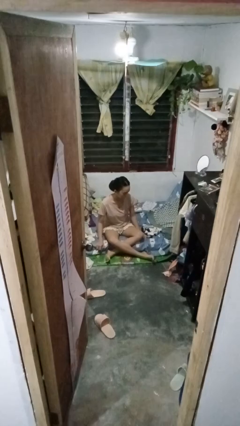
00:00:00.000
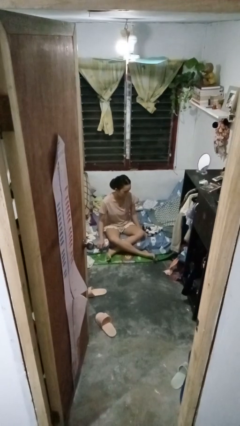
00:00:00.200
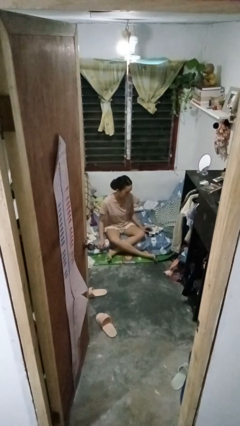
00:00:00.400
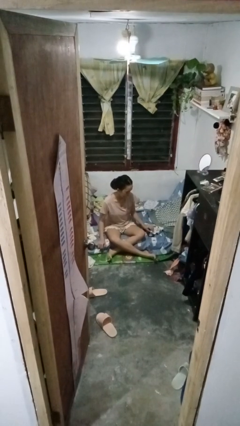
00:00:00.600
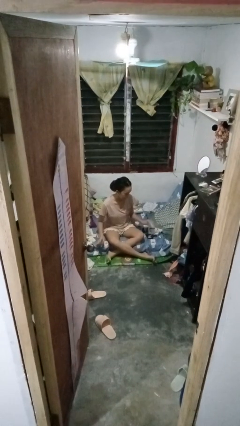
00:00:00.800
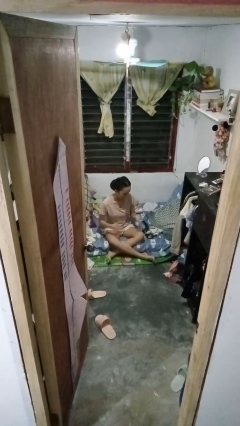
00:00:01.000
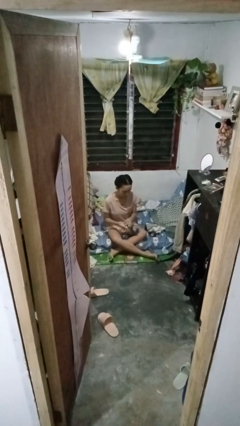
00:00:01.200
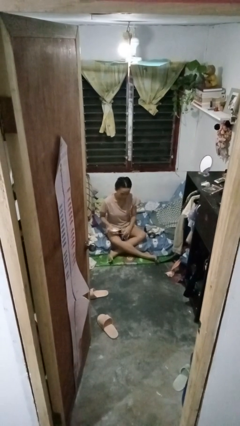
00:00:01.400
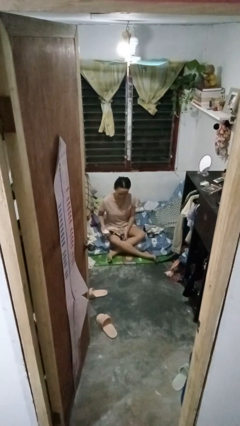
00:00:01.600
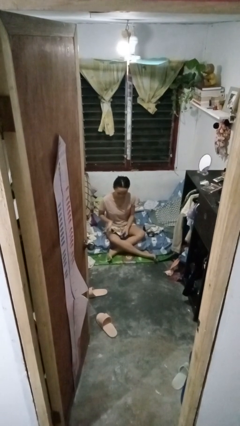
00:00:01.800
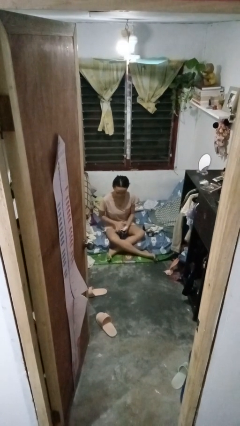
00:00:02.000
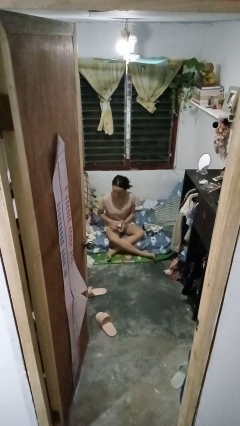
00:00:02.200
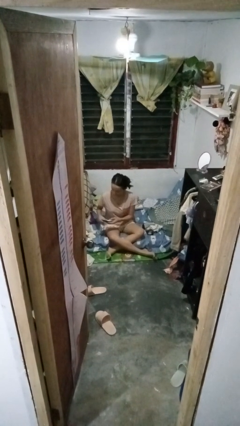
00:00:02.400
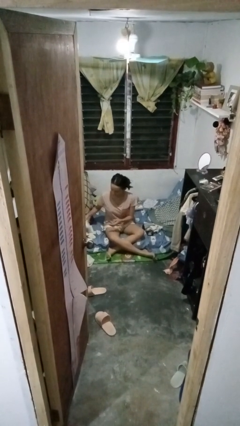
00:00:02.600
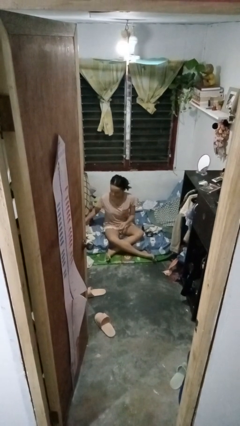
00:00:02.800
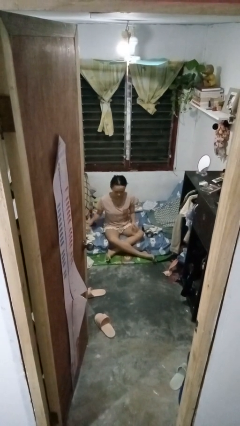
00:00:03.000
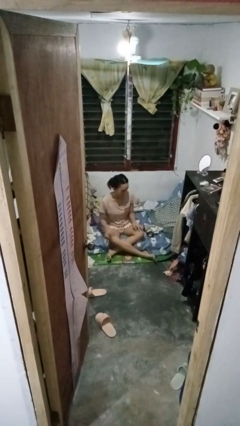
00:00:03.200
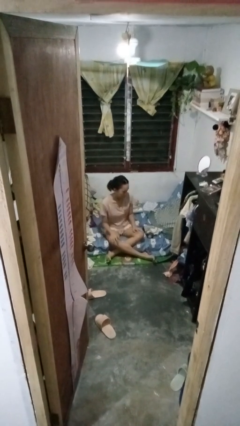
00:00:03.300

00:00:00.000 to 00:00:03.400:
person folds socks

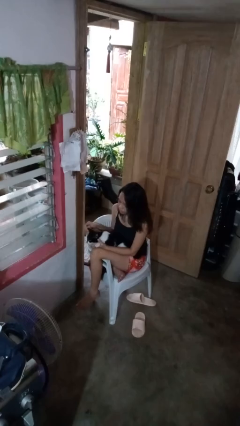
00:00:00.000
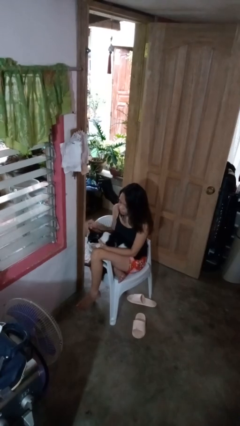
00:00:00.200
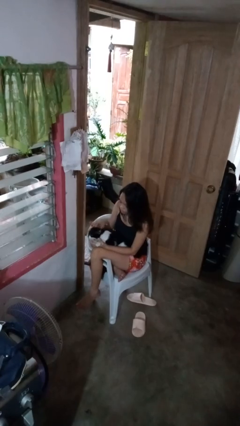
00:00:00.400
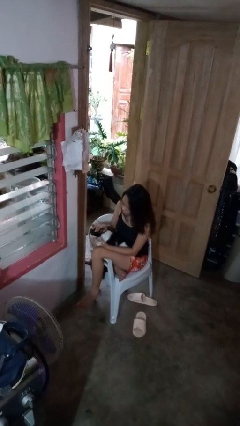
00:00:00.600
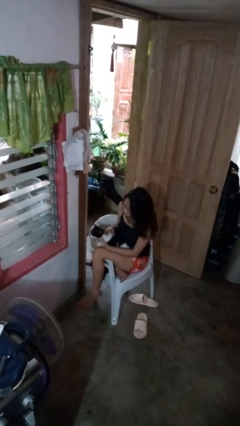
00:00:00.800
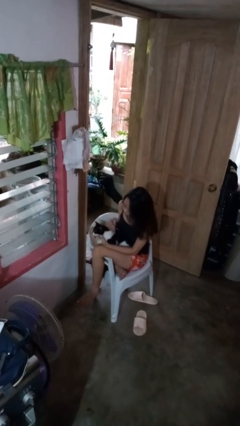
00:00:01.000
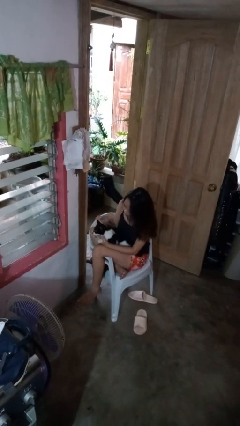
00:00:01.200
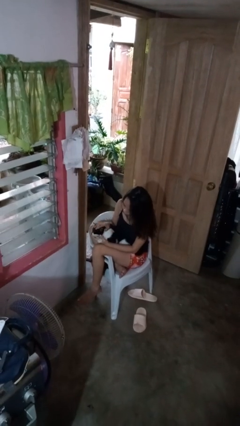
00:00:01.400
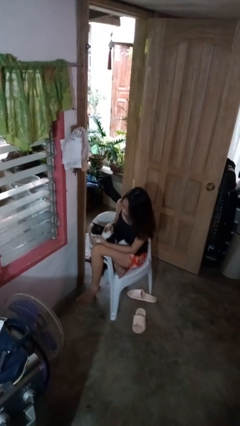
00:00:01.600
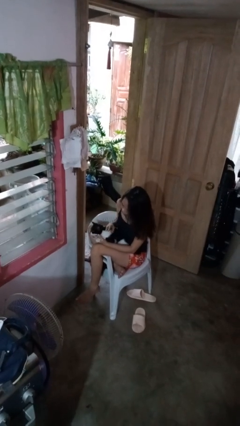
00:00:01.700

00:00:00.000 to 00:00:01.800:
person pets cat

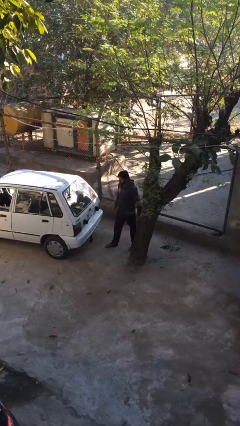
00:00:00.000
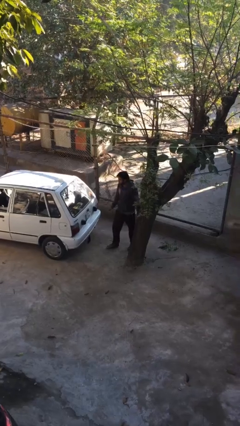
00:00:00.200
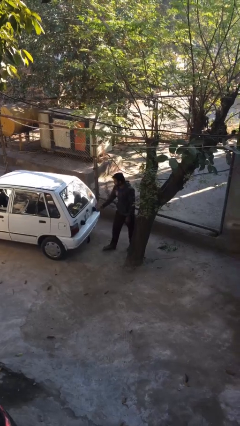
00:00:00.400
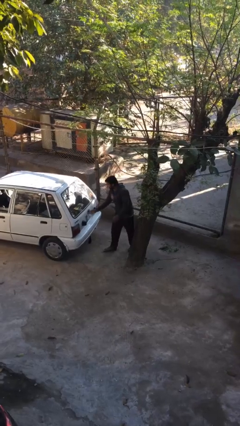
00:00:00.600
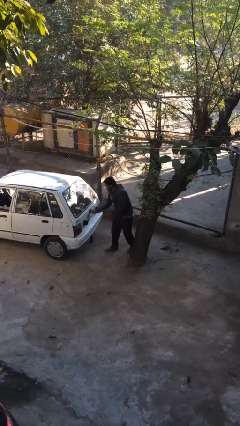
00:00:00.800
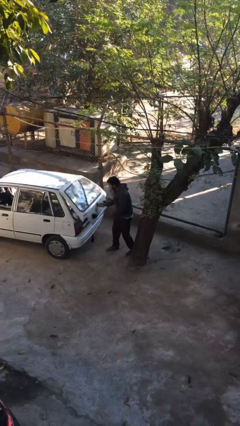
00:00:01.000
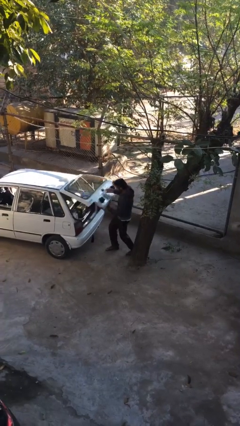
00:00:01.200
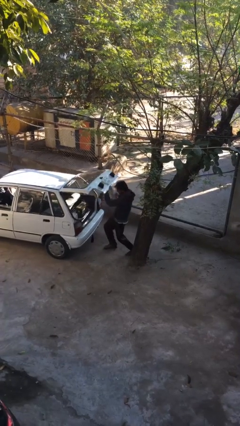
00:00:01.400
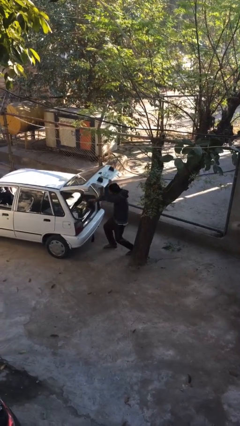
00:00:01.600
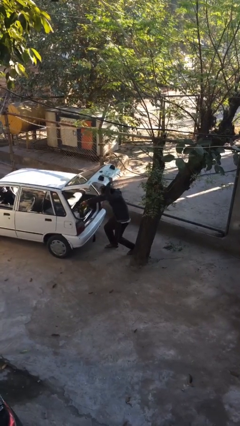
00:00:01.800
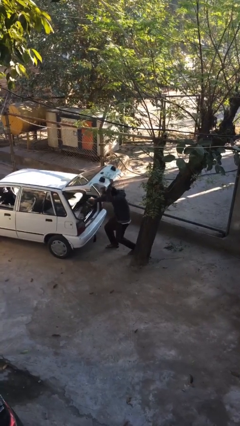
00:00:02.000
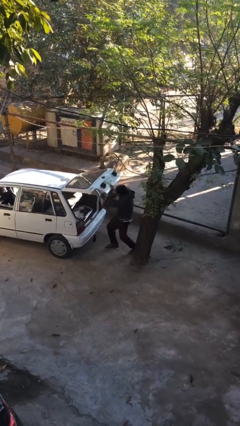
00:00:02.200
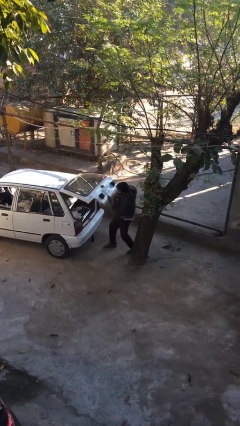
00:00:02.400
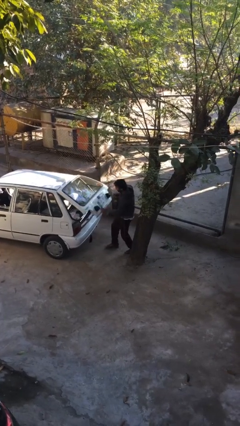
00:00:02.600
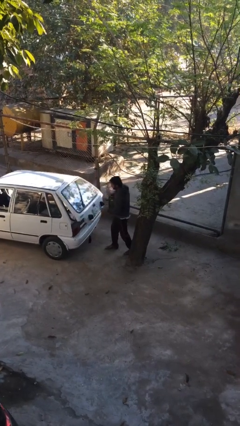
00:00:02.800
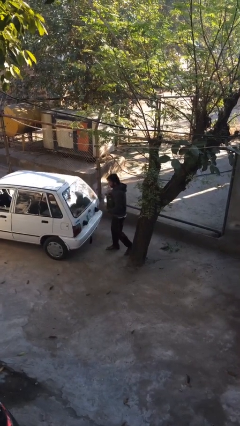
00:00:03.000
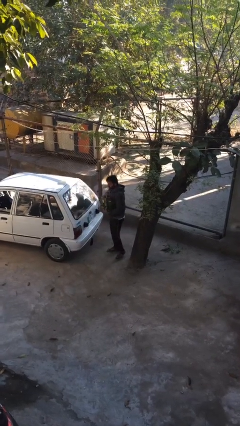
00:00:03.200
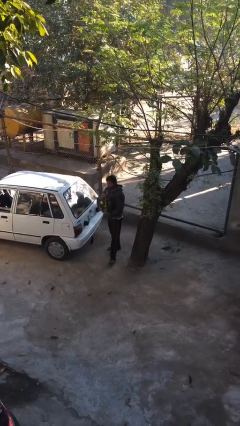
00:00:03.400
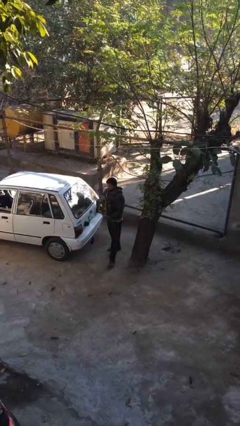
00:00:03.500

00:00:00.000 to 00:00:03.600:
person unloads car

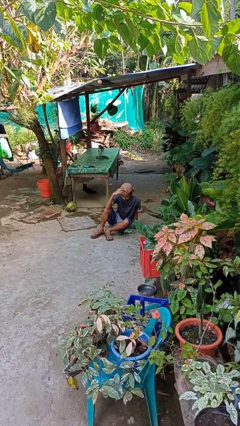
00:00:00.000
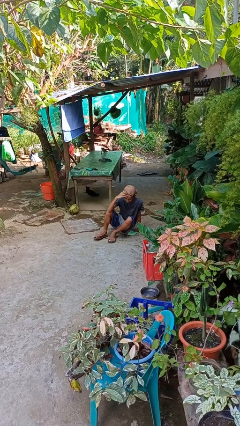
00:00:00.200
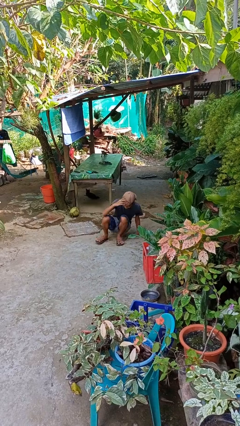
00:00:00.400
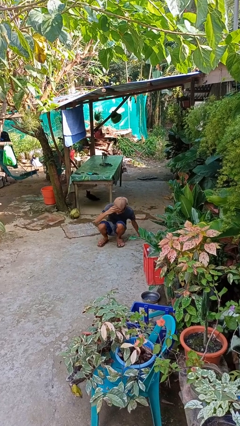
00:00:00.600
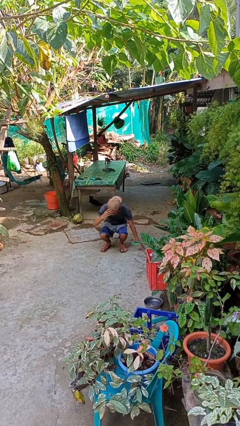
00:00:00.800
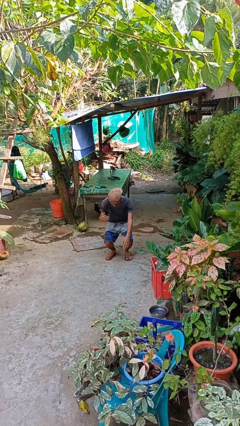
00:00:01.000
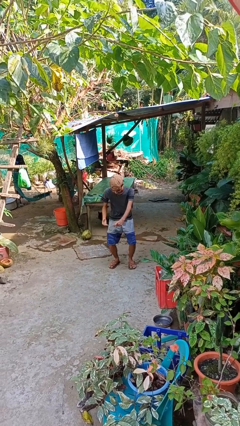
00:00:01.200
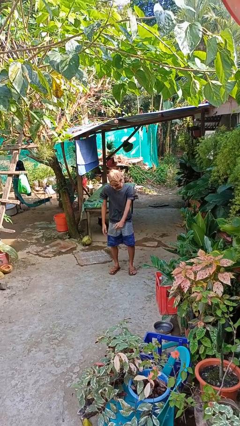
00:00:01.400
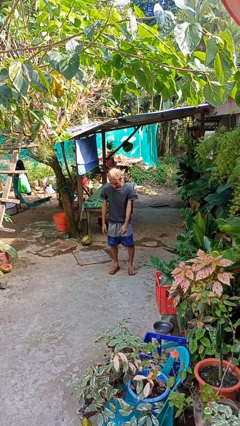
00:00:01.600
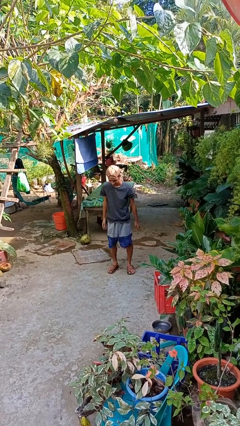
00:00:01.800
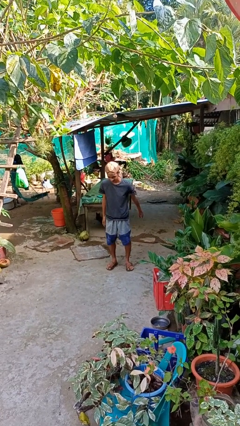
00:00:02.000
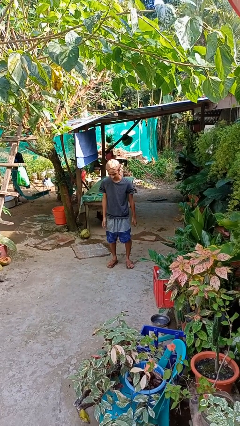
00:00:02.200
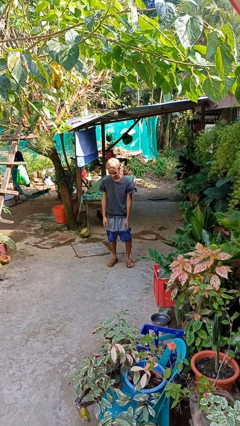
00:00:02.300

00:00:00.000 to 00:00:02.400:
person stands up from floor

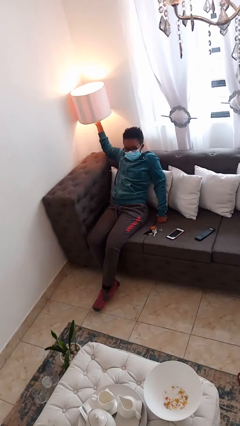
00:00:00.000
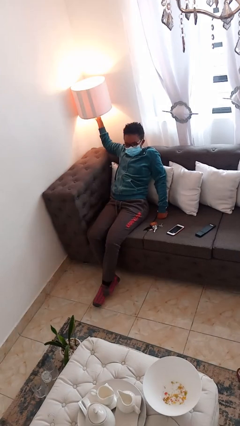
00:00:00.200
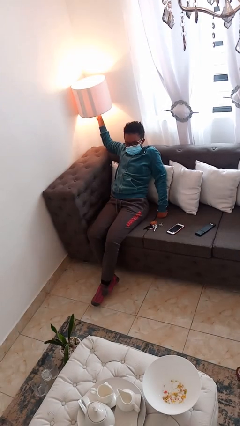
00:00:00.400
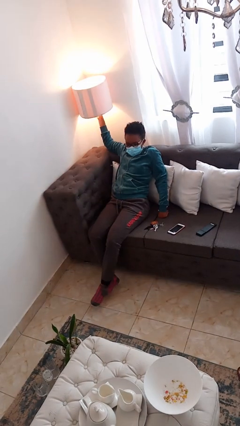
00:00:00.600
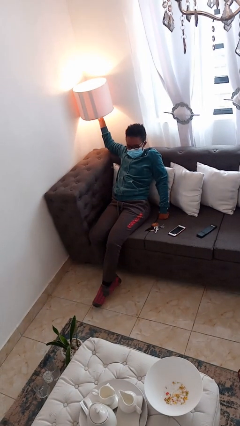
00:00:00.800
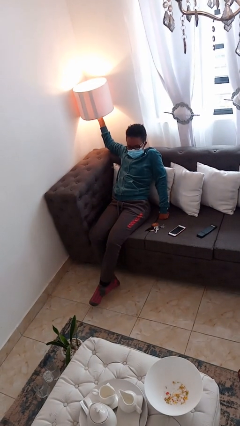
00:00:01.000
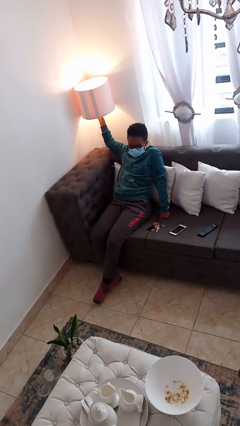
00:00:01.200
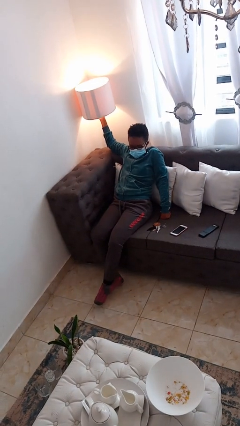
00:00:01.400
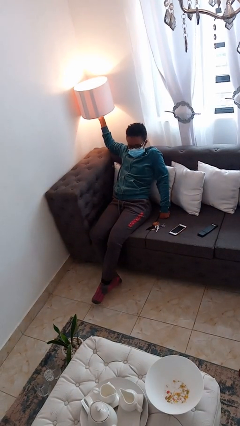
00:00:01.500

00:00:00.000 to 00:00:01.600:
person turns on lamp

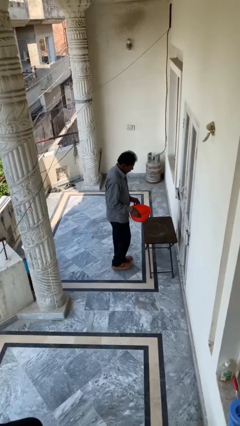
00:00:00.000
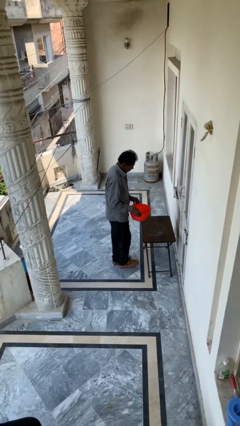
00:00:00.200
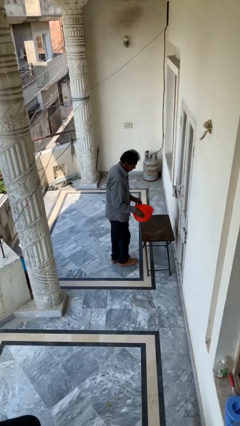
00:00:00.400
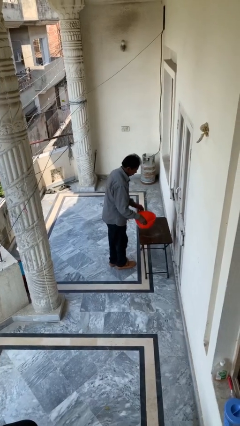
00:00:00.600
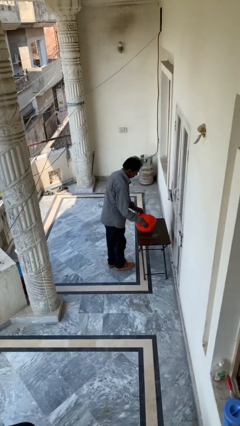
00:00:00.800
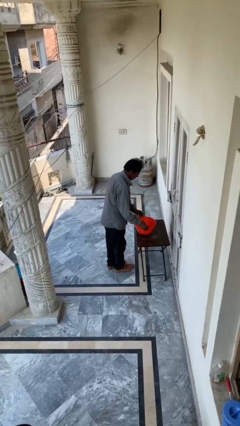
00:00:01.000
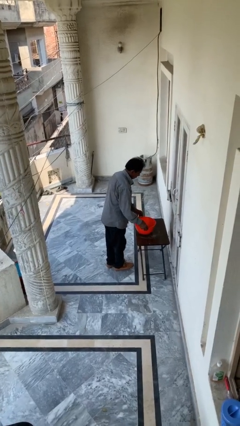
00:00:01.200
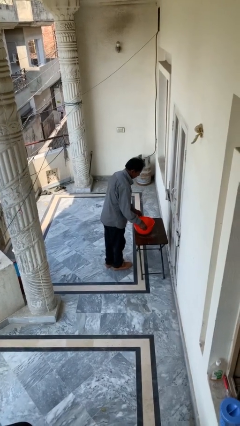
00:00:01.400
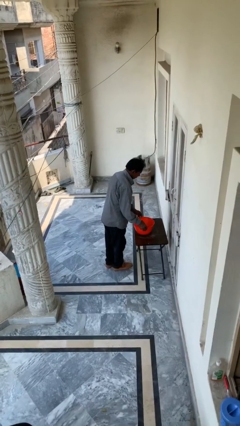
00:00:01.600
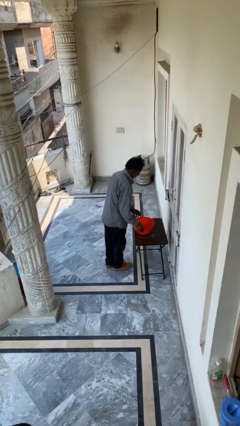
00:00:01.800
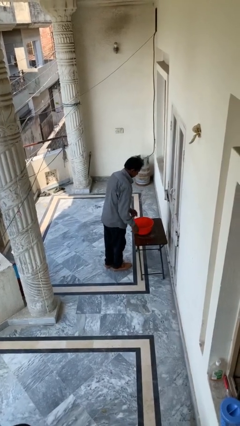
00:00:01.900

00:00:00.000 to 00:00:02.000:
person puts down object on table

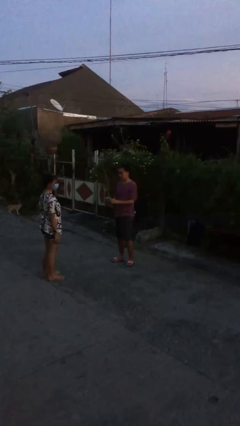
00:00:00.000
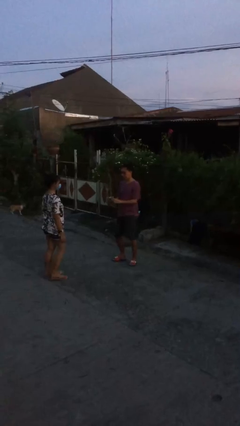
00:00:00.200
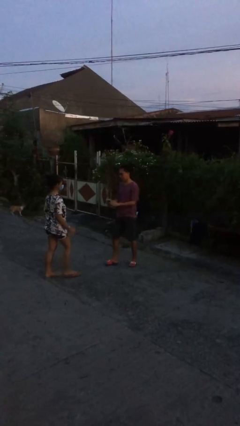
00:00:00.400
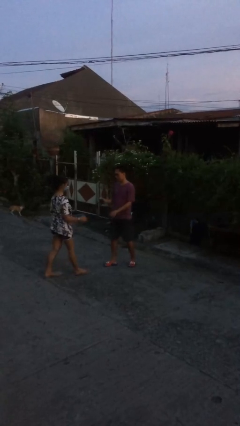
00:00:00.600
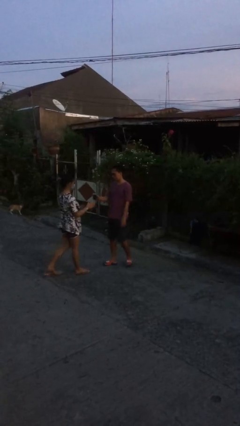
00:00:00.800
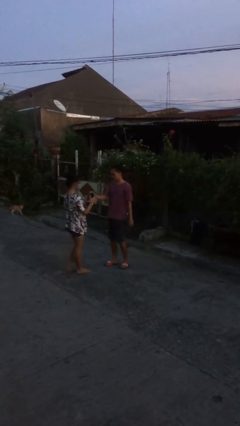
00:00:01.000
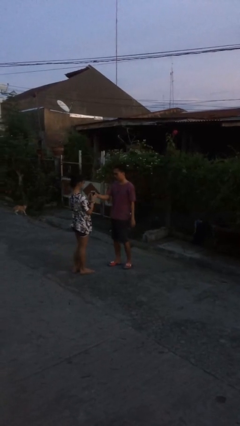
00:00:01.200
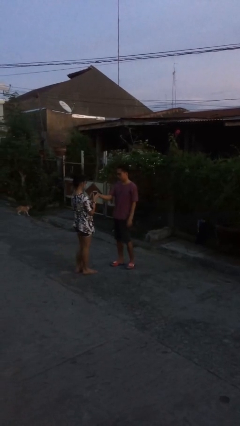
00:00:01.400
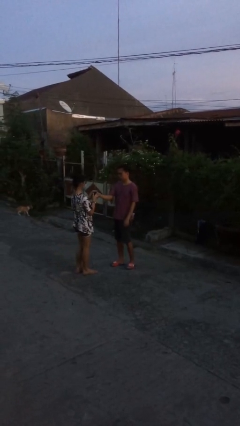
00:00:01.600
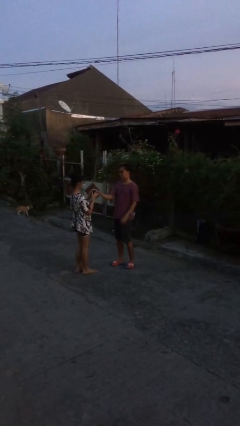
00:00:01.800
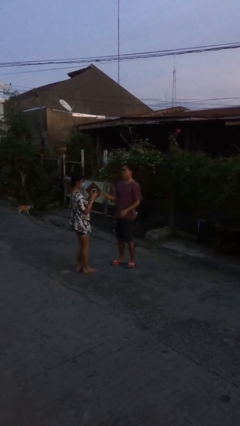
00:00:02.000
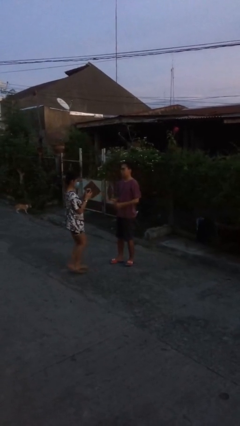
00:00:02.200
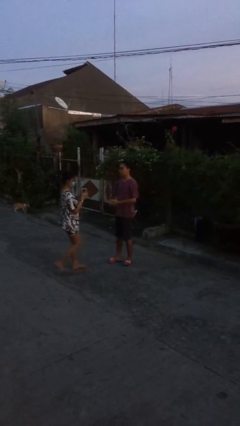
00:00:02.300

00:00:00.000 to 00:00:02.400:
person transfers object to person
